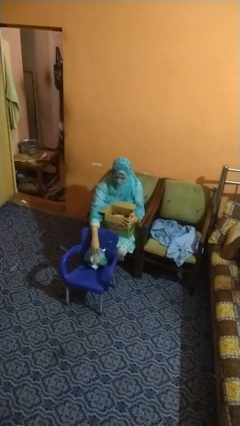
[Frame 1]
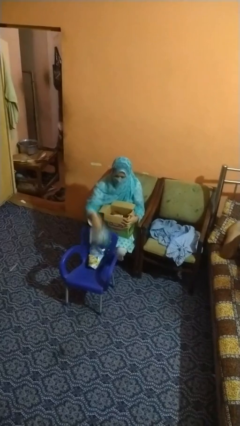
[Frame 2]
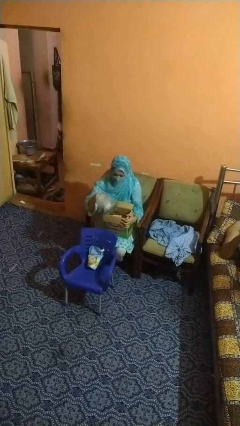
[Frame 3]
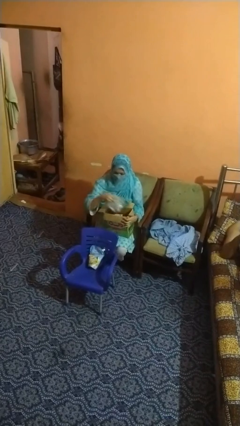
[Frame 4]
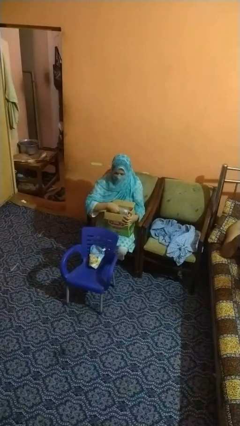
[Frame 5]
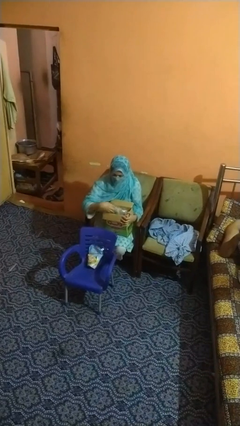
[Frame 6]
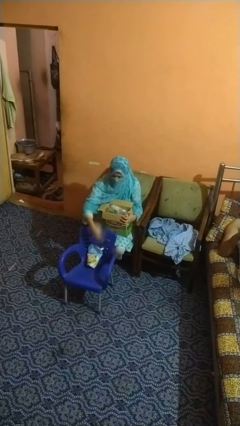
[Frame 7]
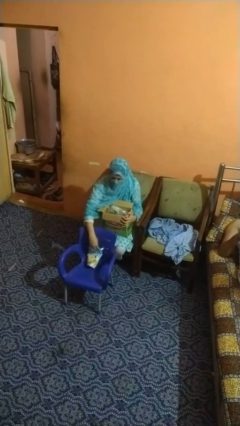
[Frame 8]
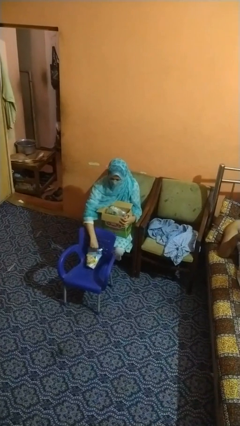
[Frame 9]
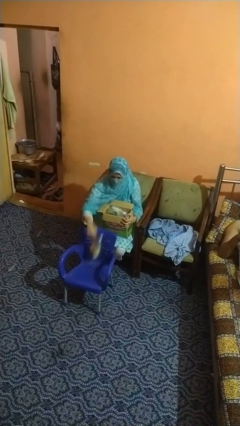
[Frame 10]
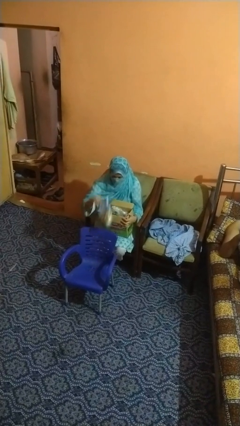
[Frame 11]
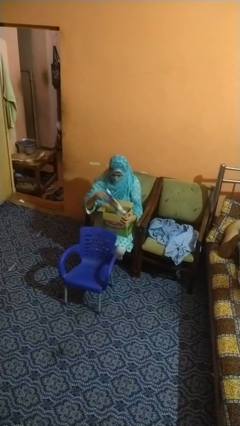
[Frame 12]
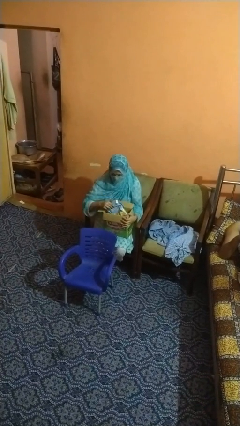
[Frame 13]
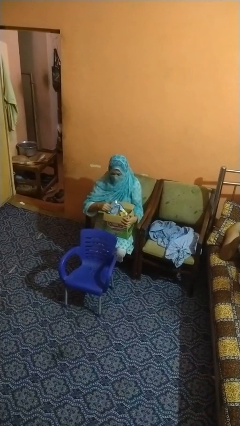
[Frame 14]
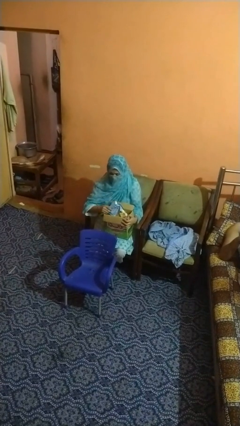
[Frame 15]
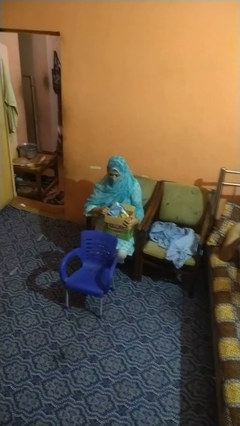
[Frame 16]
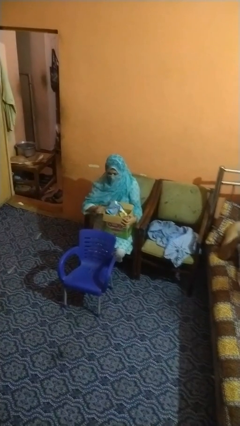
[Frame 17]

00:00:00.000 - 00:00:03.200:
person puts object into box

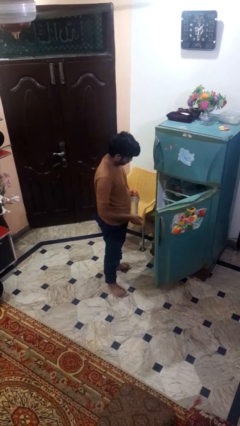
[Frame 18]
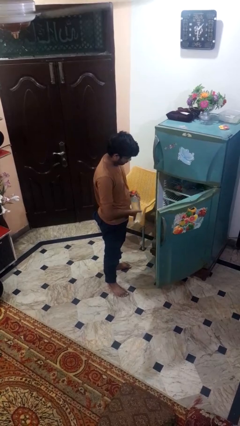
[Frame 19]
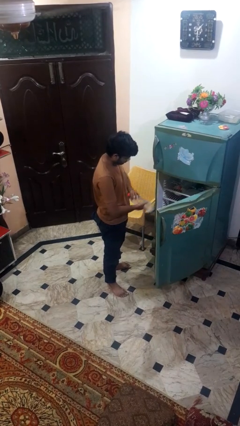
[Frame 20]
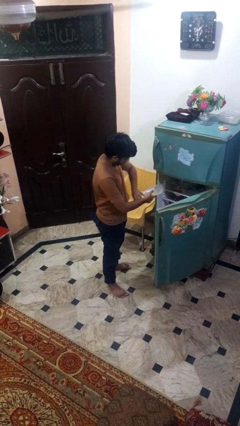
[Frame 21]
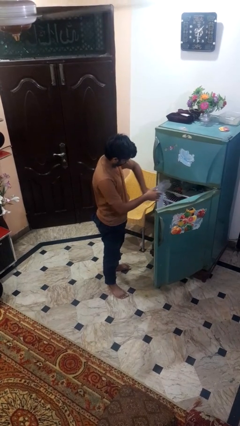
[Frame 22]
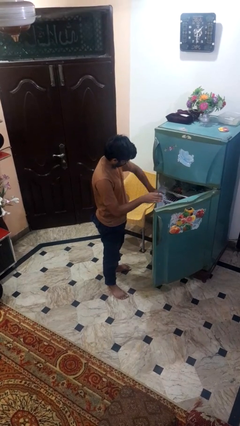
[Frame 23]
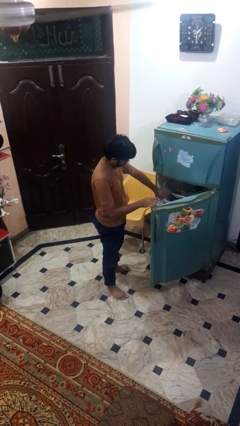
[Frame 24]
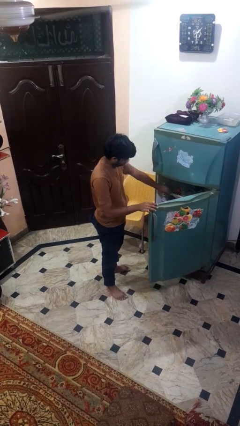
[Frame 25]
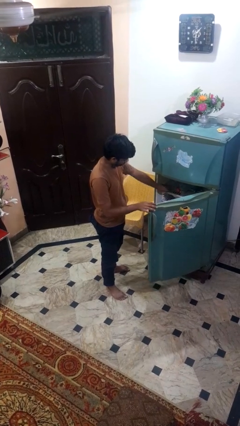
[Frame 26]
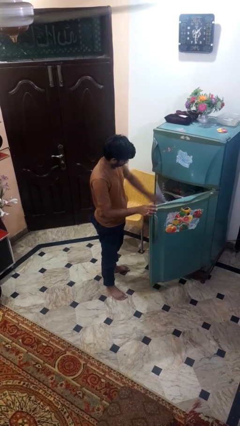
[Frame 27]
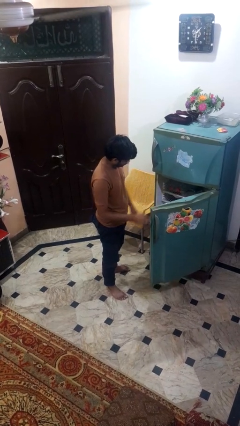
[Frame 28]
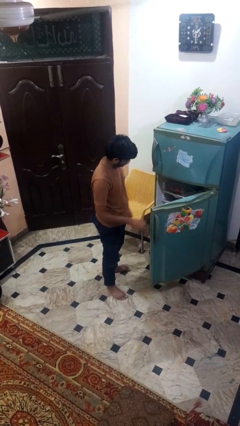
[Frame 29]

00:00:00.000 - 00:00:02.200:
person puts object into refrigerator

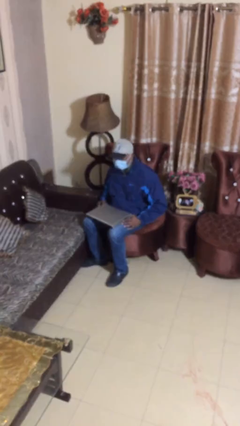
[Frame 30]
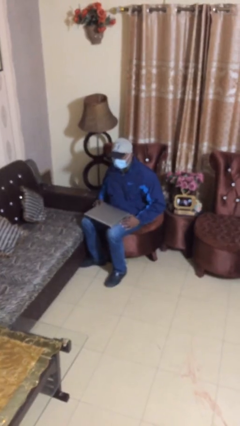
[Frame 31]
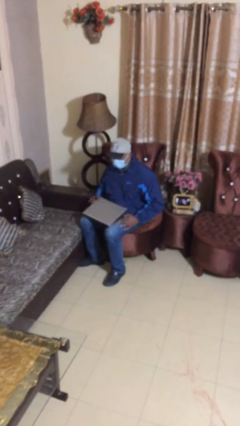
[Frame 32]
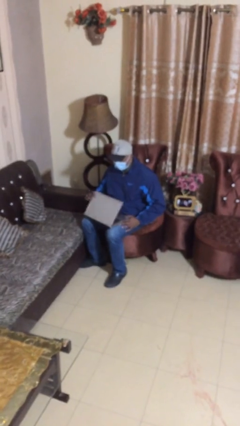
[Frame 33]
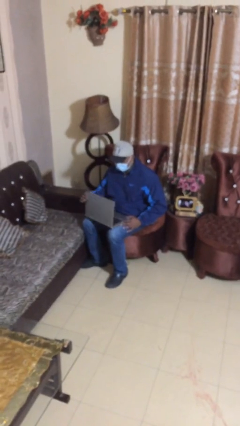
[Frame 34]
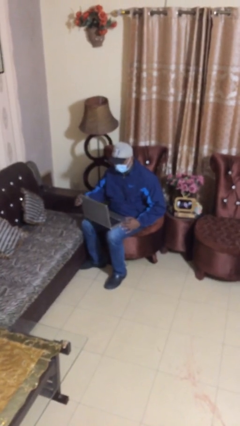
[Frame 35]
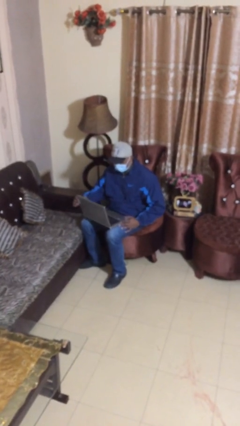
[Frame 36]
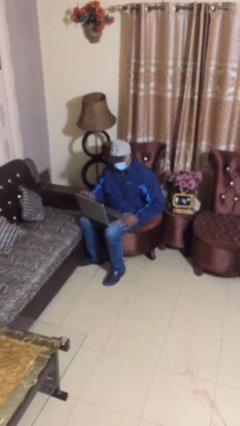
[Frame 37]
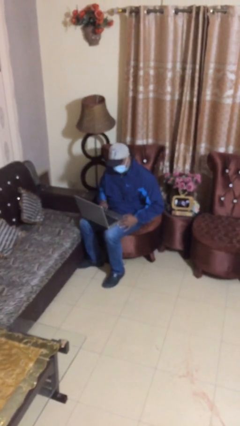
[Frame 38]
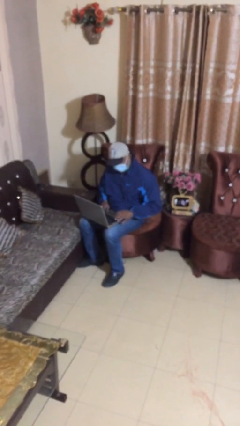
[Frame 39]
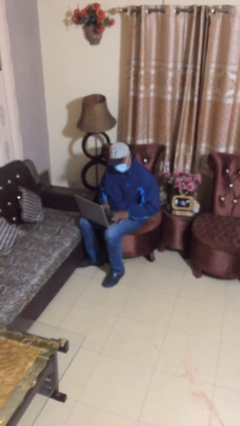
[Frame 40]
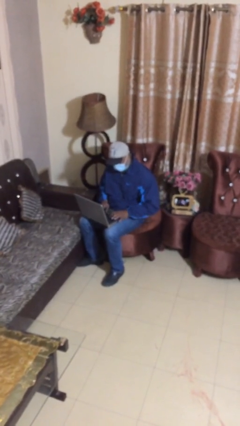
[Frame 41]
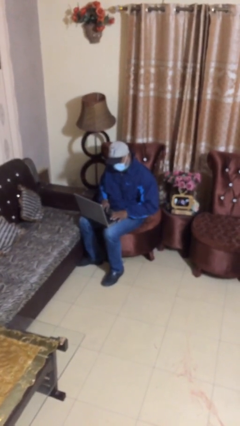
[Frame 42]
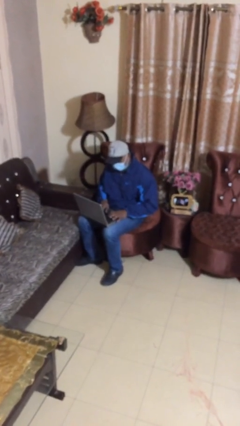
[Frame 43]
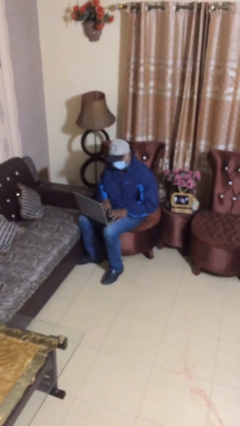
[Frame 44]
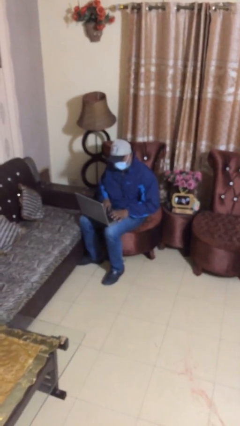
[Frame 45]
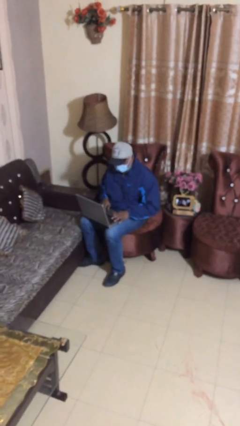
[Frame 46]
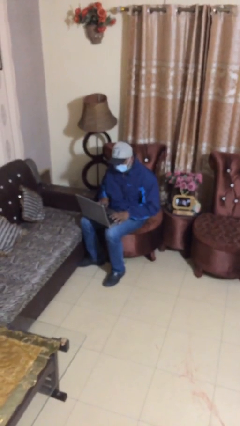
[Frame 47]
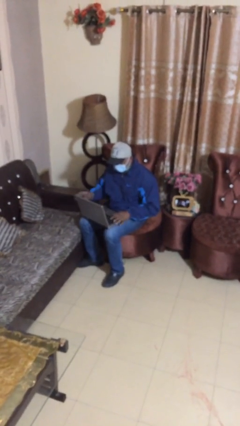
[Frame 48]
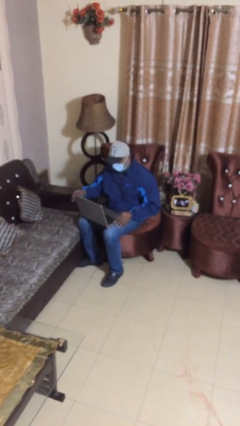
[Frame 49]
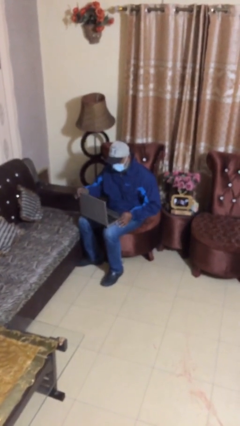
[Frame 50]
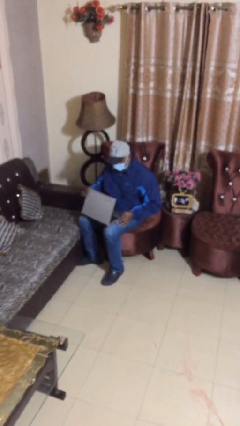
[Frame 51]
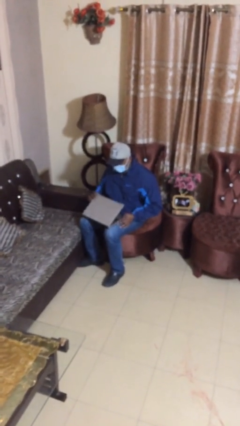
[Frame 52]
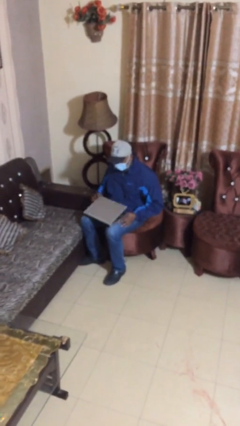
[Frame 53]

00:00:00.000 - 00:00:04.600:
person interacts with laptop

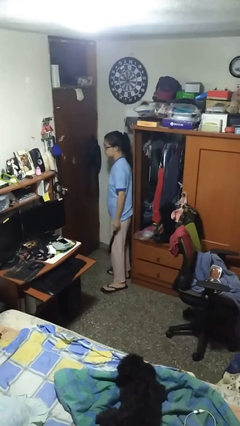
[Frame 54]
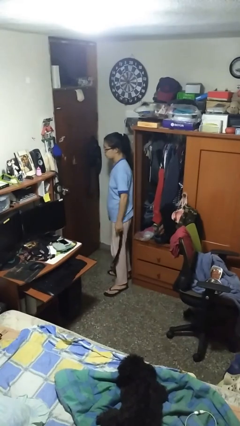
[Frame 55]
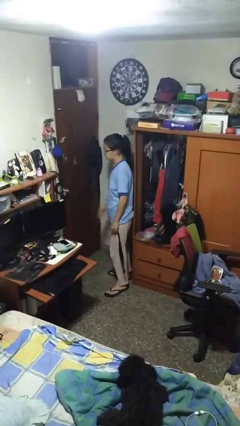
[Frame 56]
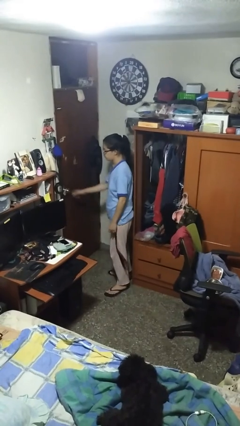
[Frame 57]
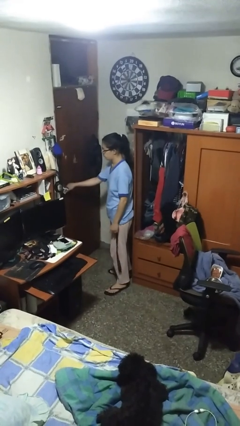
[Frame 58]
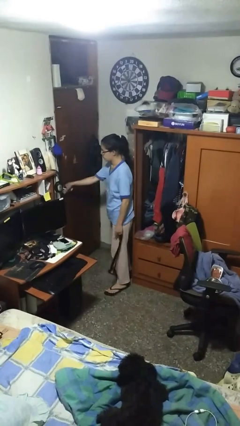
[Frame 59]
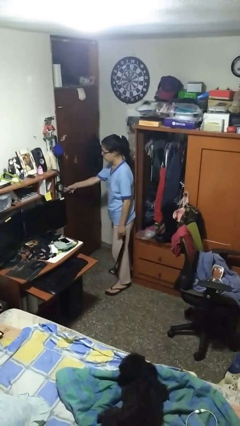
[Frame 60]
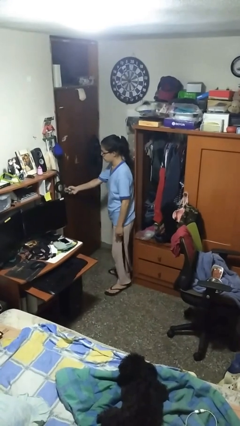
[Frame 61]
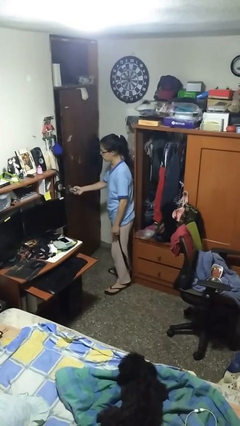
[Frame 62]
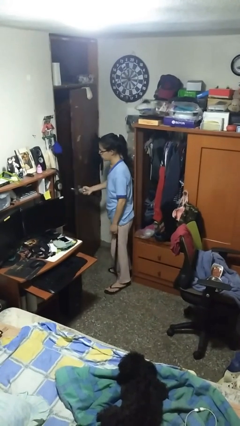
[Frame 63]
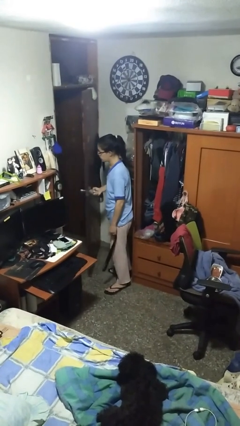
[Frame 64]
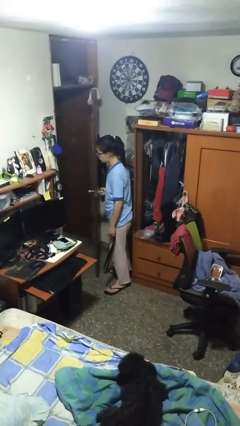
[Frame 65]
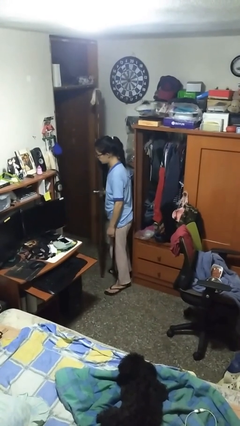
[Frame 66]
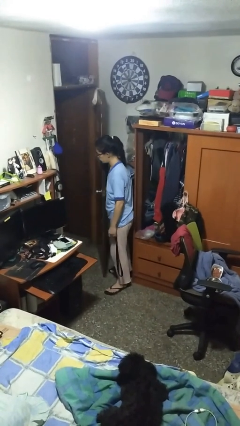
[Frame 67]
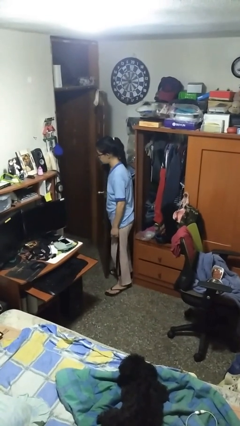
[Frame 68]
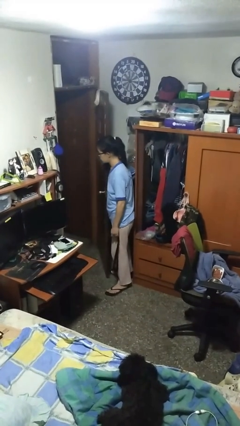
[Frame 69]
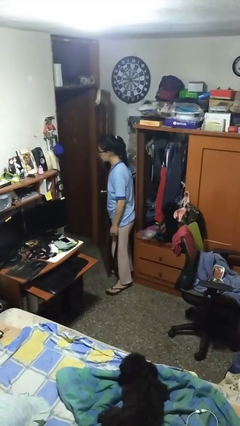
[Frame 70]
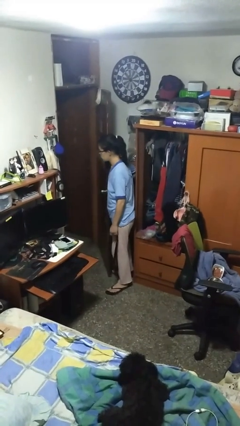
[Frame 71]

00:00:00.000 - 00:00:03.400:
person opens facility door

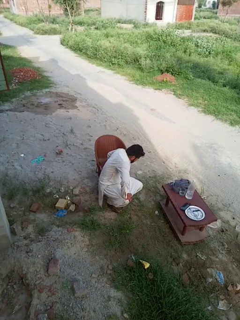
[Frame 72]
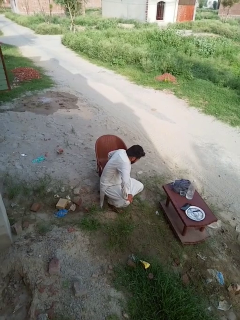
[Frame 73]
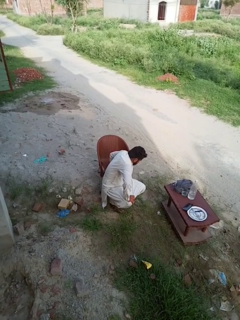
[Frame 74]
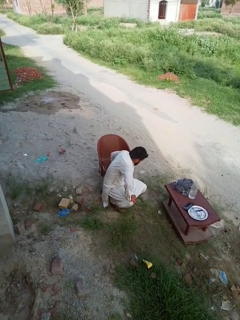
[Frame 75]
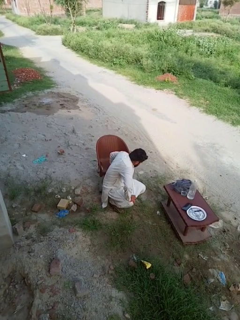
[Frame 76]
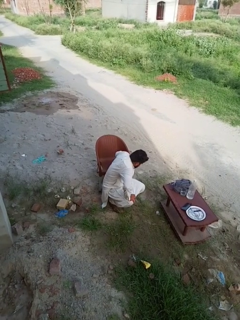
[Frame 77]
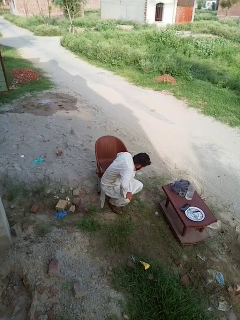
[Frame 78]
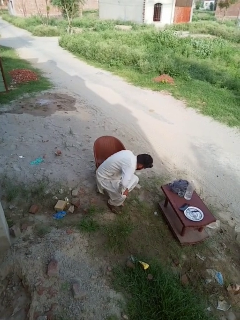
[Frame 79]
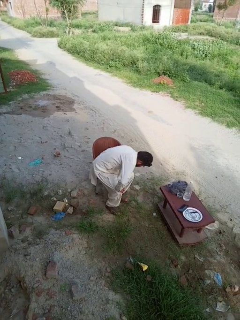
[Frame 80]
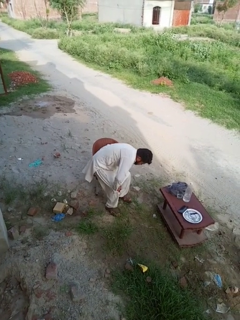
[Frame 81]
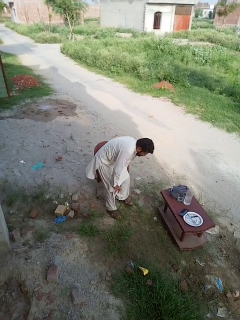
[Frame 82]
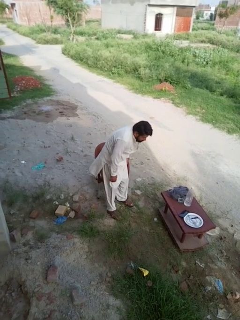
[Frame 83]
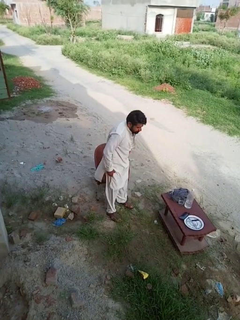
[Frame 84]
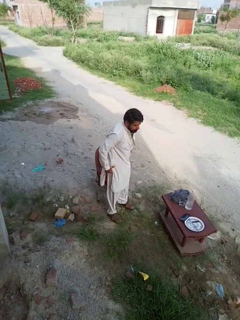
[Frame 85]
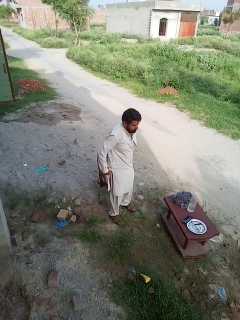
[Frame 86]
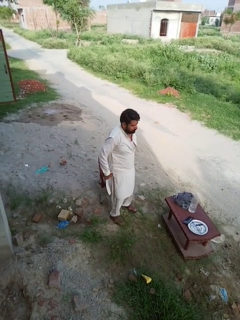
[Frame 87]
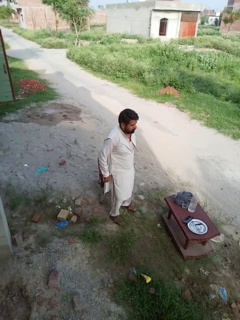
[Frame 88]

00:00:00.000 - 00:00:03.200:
person stands up from floor

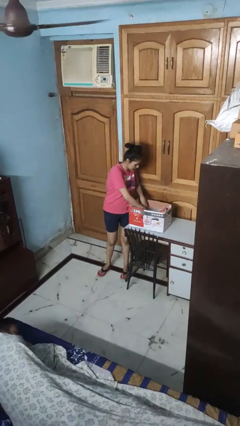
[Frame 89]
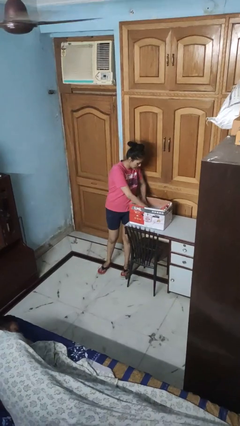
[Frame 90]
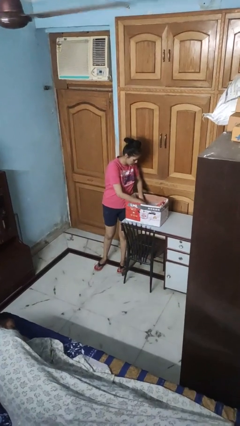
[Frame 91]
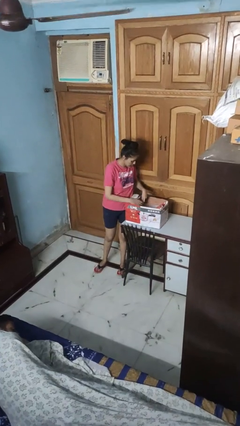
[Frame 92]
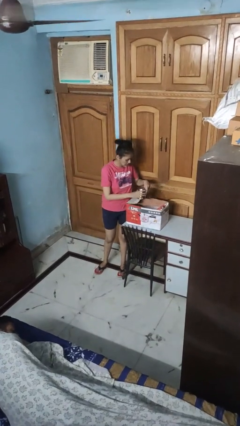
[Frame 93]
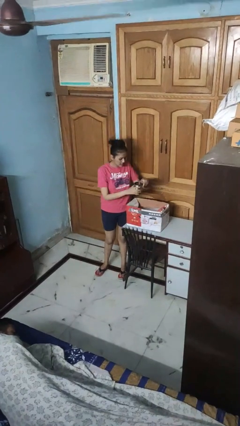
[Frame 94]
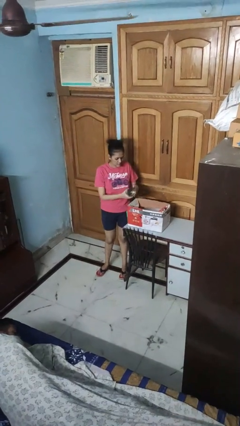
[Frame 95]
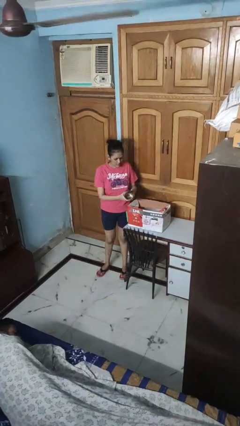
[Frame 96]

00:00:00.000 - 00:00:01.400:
person takes object from box
